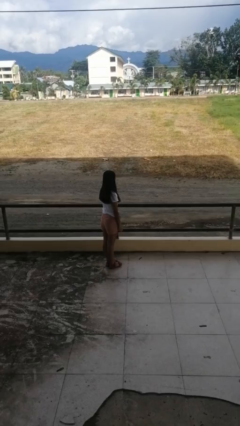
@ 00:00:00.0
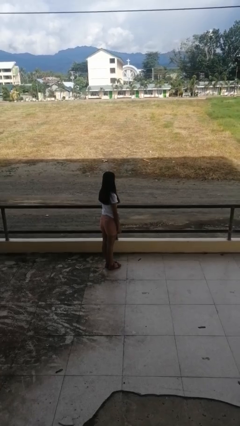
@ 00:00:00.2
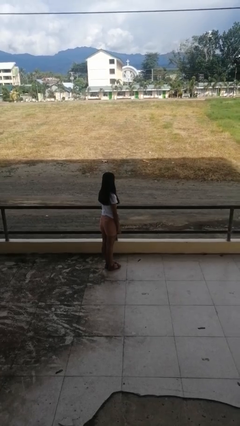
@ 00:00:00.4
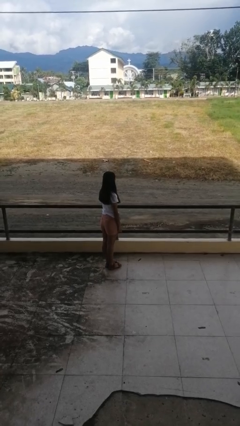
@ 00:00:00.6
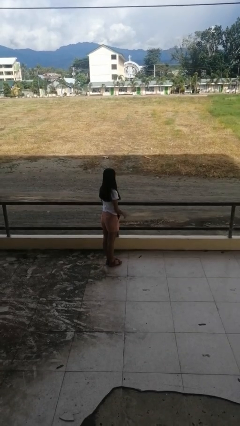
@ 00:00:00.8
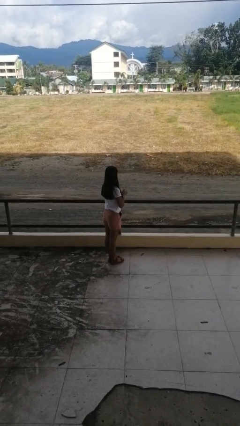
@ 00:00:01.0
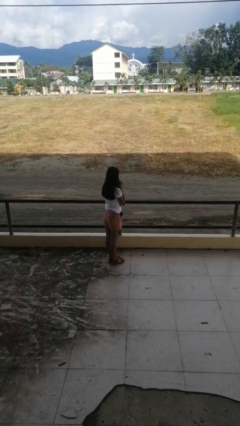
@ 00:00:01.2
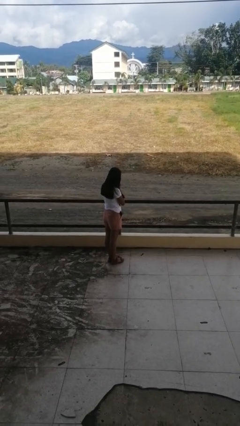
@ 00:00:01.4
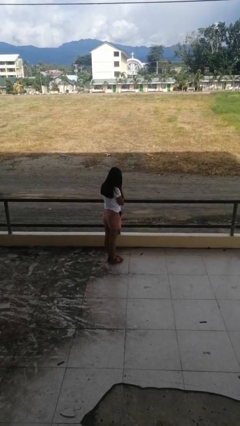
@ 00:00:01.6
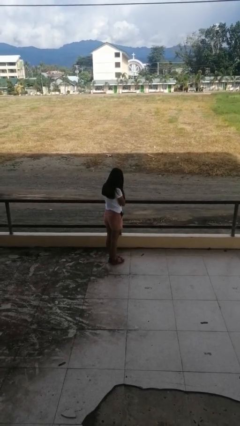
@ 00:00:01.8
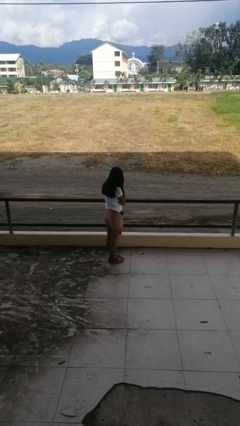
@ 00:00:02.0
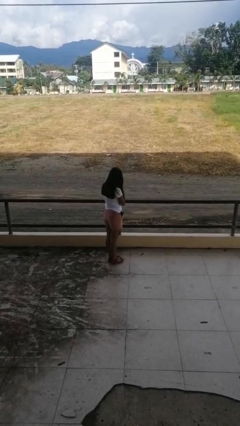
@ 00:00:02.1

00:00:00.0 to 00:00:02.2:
person sneezes into hand

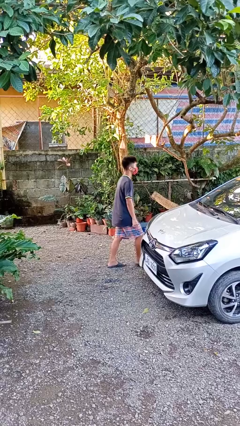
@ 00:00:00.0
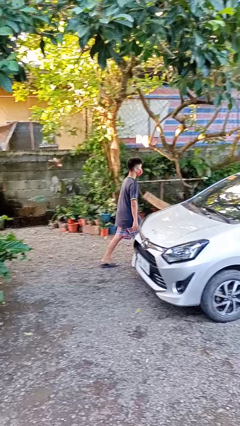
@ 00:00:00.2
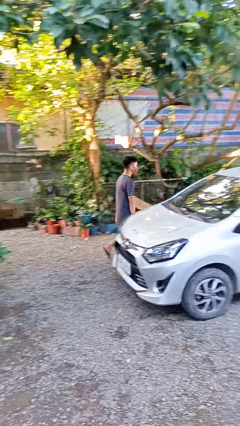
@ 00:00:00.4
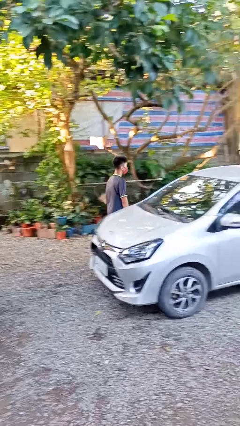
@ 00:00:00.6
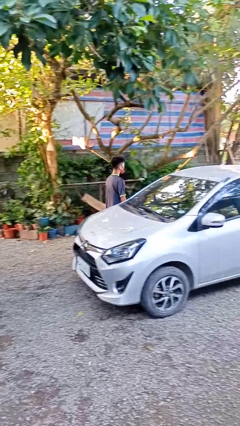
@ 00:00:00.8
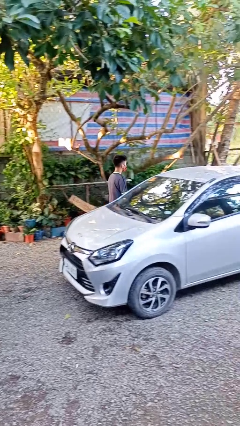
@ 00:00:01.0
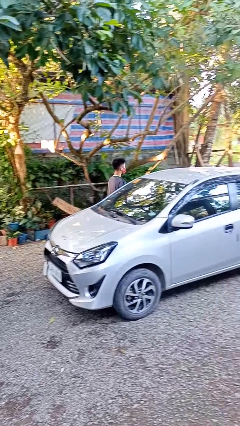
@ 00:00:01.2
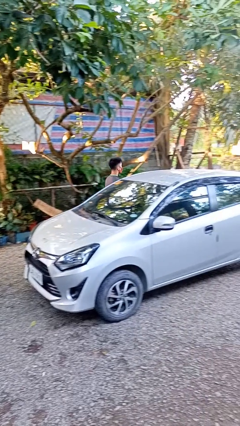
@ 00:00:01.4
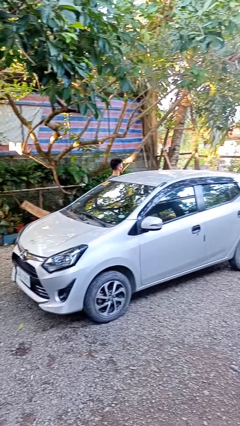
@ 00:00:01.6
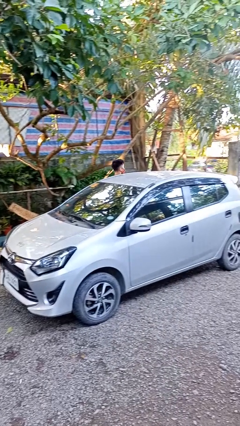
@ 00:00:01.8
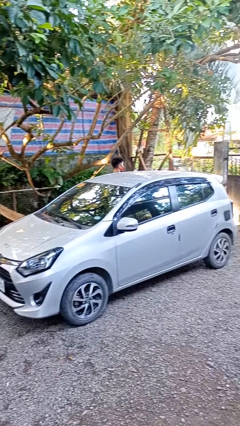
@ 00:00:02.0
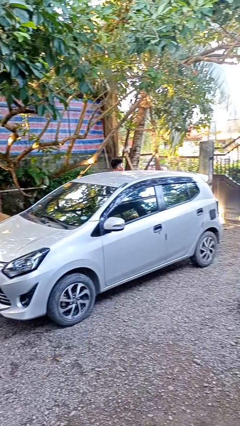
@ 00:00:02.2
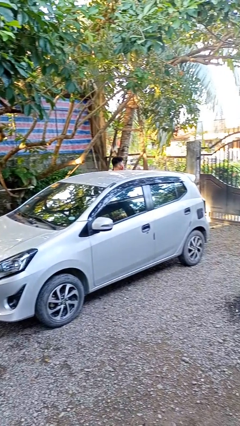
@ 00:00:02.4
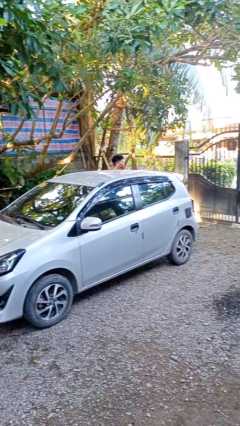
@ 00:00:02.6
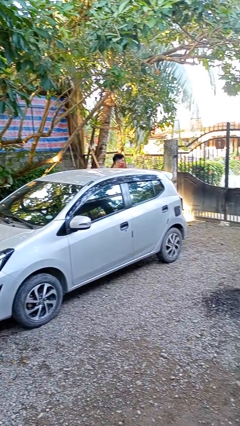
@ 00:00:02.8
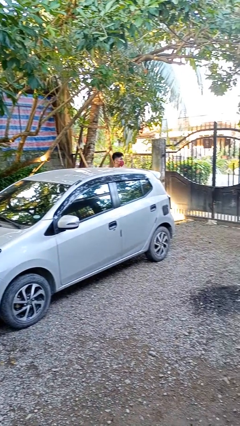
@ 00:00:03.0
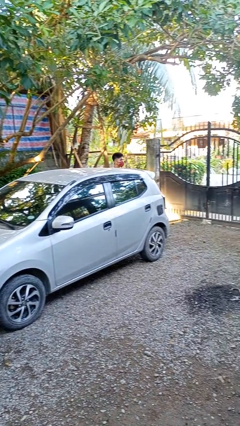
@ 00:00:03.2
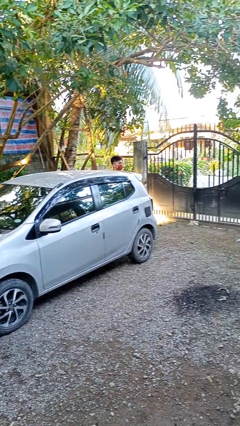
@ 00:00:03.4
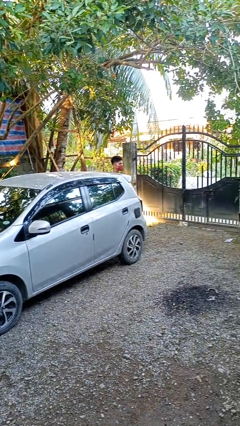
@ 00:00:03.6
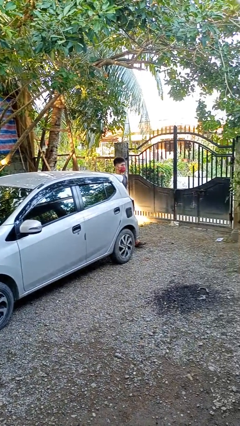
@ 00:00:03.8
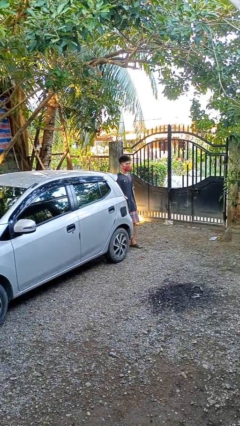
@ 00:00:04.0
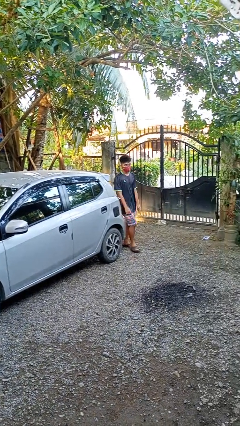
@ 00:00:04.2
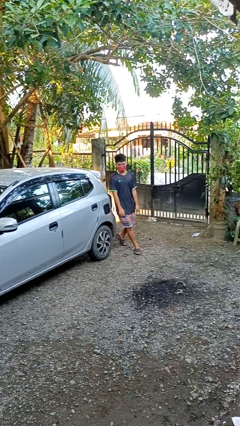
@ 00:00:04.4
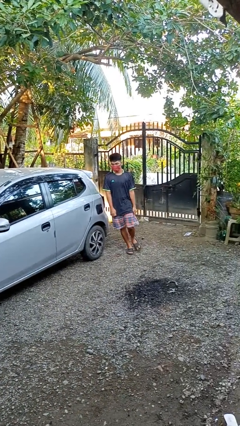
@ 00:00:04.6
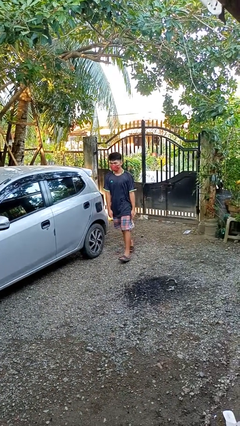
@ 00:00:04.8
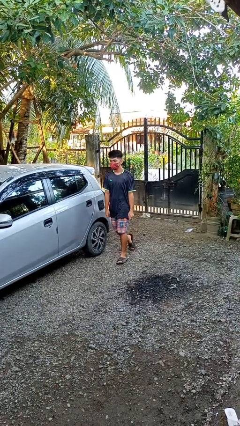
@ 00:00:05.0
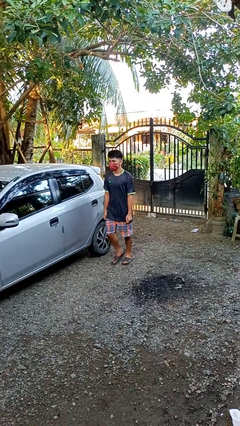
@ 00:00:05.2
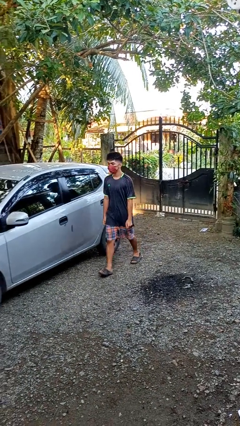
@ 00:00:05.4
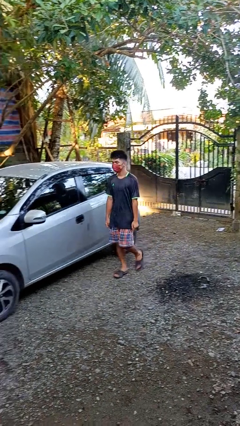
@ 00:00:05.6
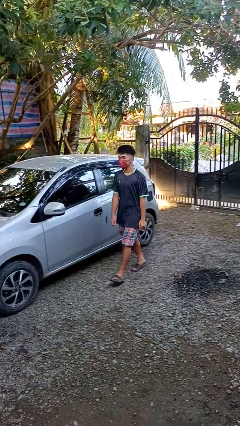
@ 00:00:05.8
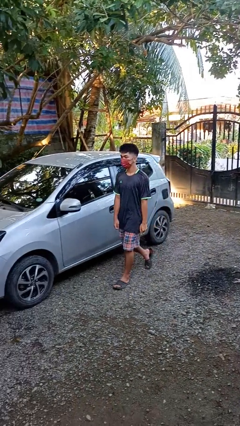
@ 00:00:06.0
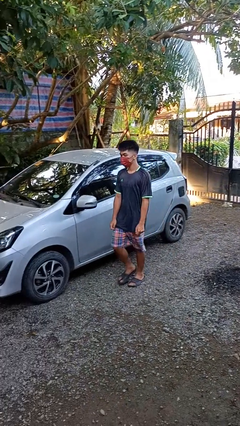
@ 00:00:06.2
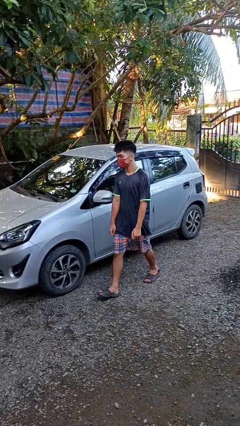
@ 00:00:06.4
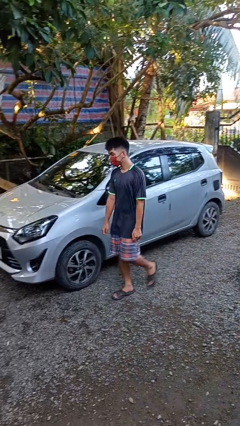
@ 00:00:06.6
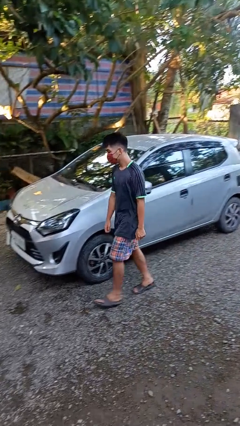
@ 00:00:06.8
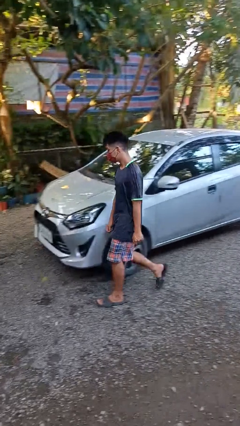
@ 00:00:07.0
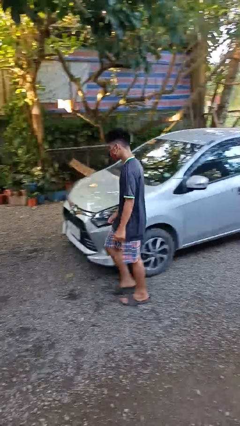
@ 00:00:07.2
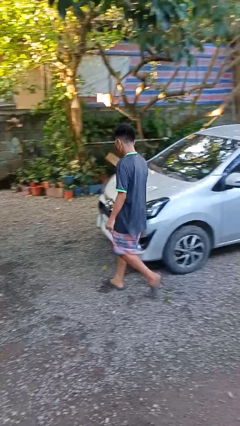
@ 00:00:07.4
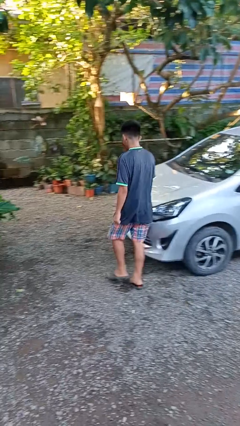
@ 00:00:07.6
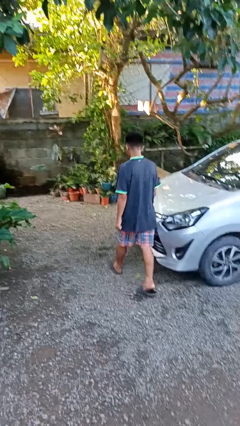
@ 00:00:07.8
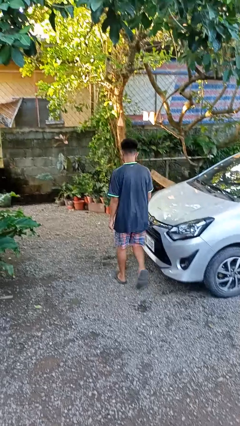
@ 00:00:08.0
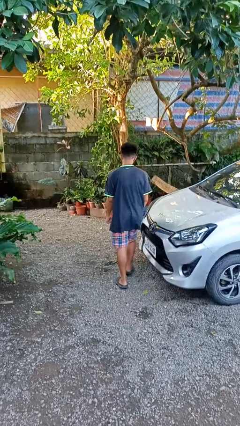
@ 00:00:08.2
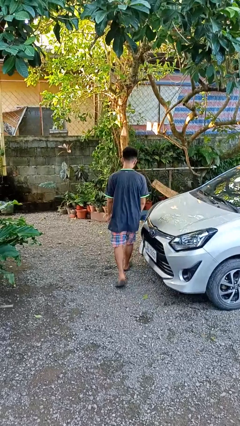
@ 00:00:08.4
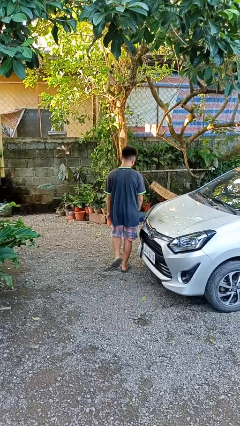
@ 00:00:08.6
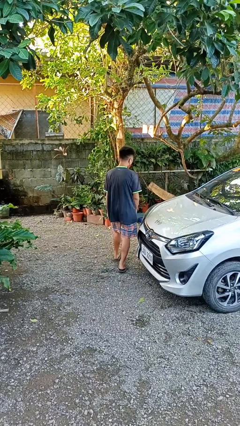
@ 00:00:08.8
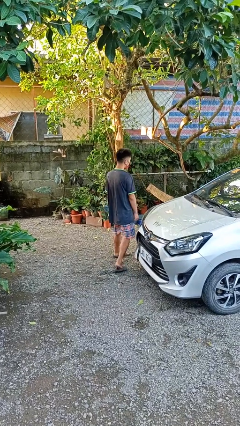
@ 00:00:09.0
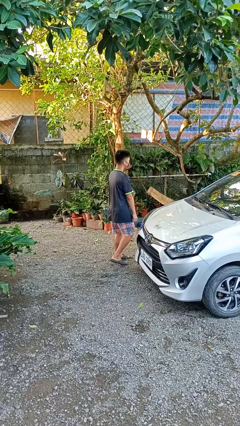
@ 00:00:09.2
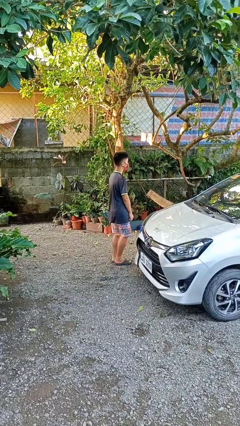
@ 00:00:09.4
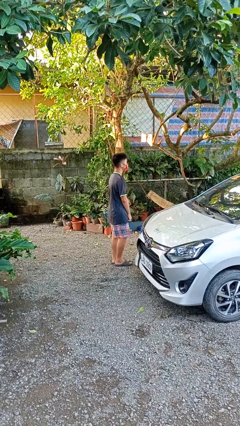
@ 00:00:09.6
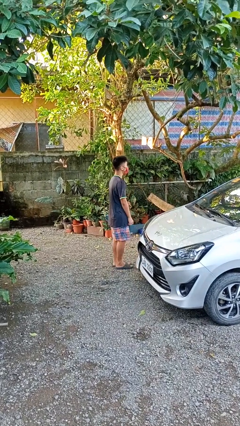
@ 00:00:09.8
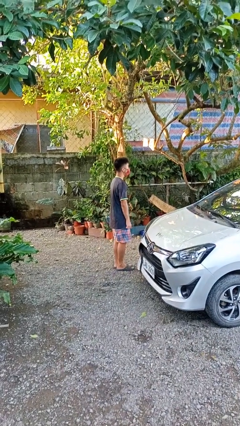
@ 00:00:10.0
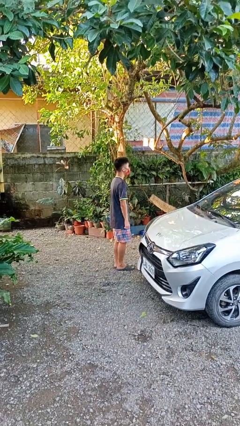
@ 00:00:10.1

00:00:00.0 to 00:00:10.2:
person walks around car

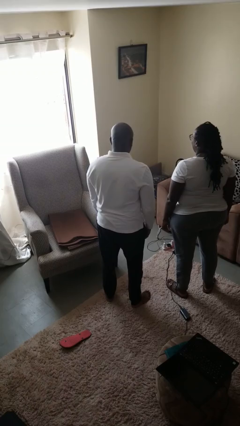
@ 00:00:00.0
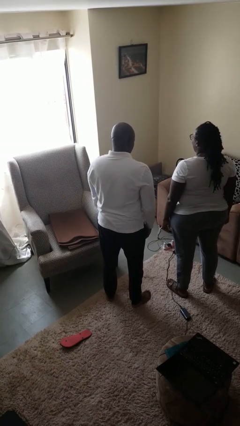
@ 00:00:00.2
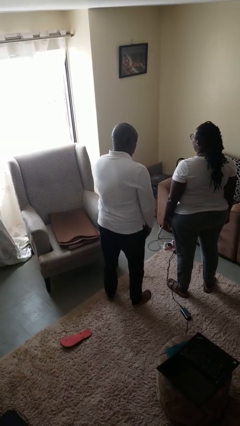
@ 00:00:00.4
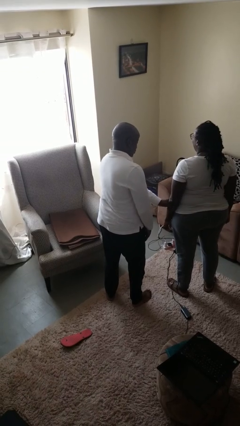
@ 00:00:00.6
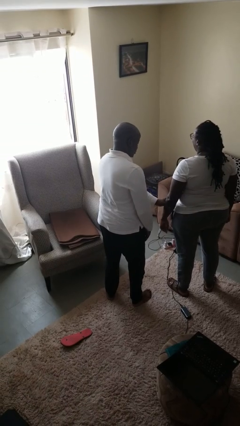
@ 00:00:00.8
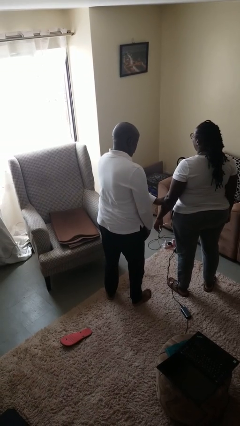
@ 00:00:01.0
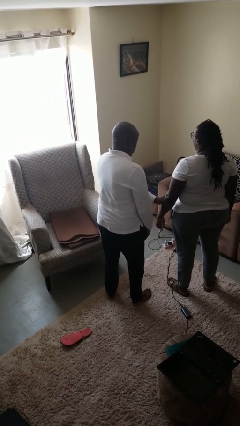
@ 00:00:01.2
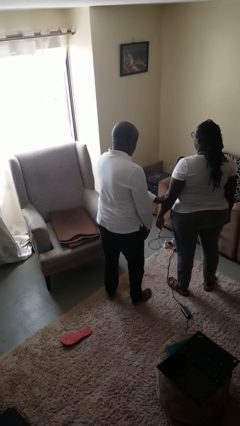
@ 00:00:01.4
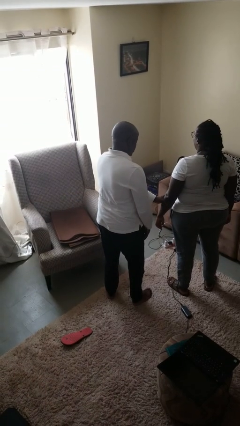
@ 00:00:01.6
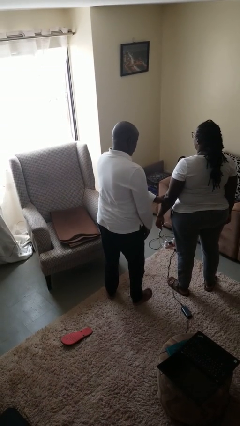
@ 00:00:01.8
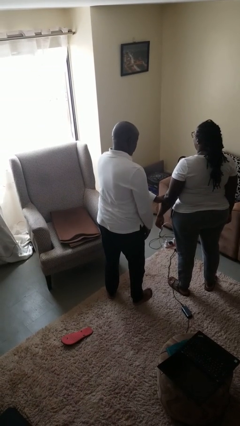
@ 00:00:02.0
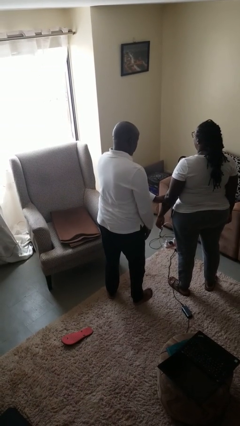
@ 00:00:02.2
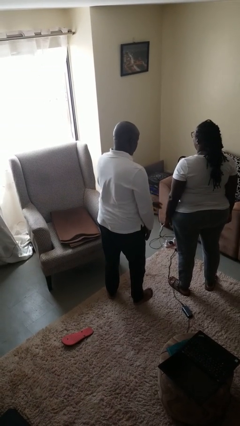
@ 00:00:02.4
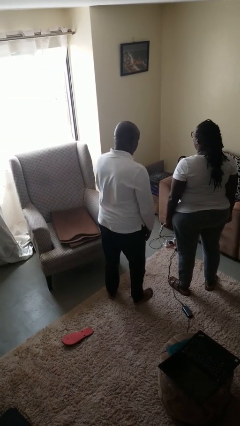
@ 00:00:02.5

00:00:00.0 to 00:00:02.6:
person grabs person by forearm

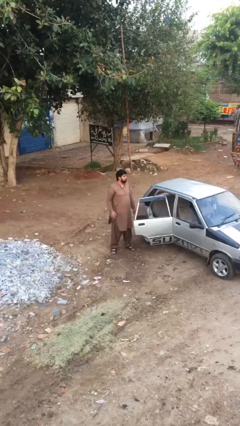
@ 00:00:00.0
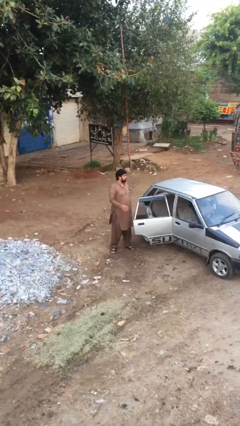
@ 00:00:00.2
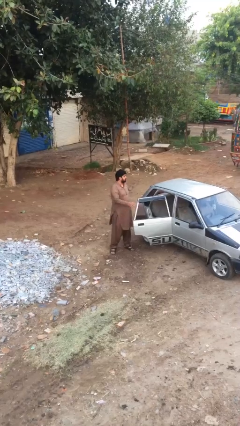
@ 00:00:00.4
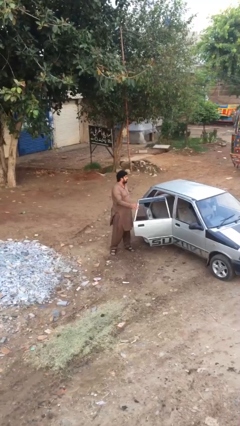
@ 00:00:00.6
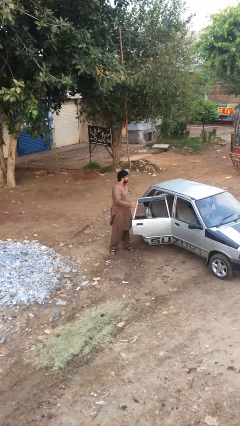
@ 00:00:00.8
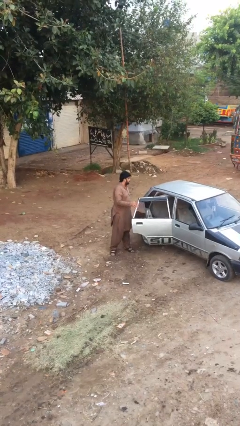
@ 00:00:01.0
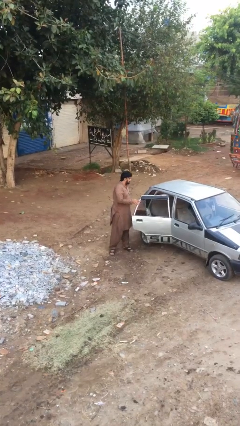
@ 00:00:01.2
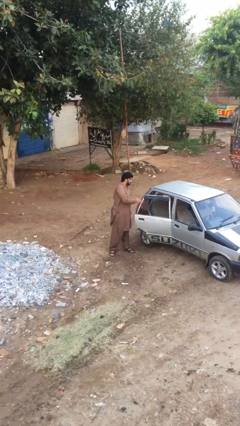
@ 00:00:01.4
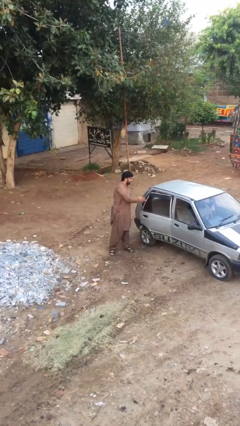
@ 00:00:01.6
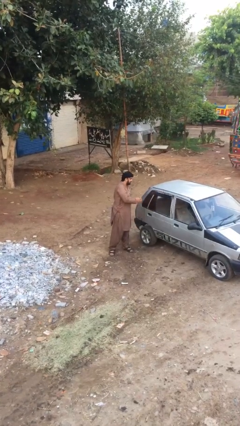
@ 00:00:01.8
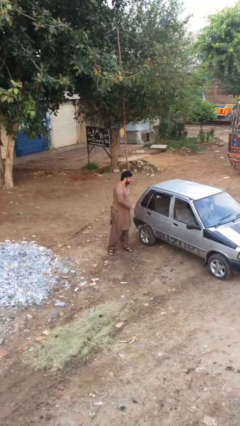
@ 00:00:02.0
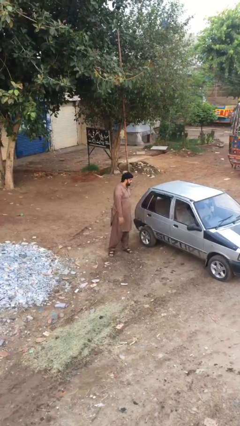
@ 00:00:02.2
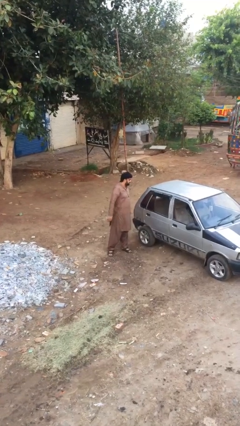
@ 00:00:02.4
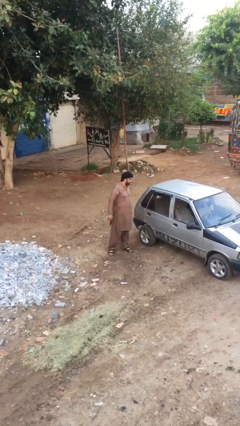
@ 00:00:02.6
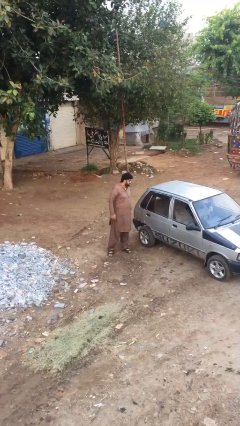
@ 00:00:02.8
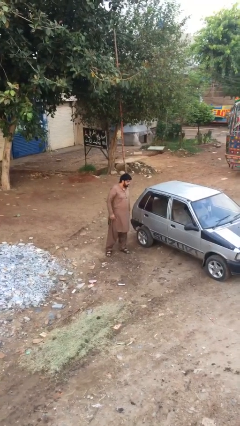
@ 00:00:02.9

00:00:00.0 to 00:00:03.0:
person closes car door
